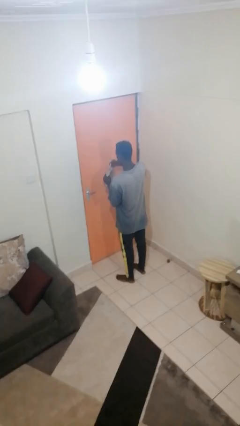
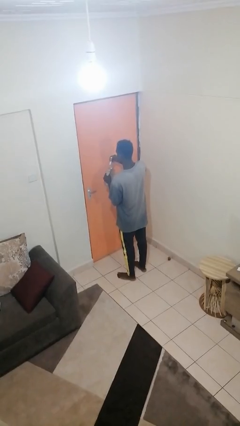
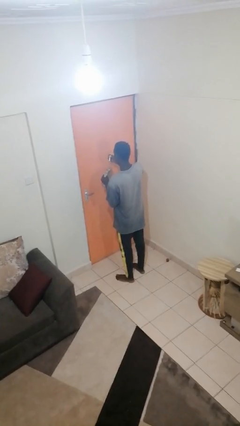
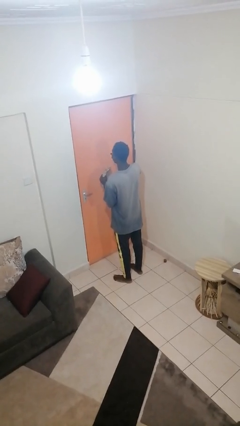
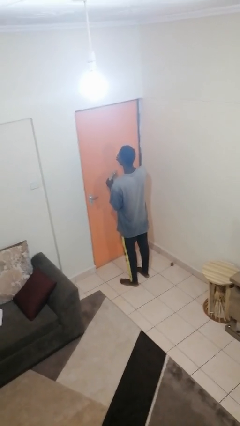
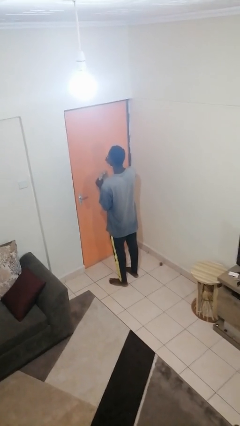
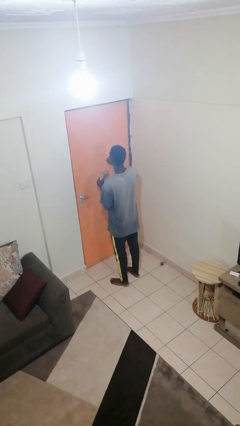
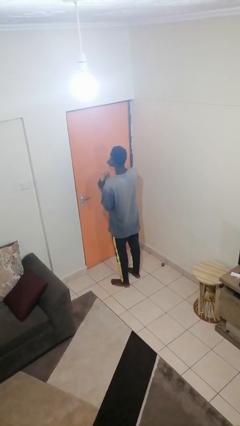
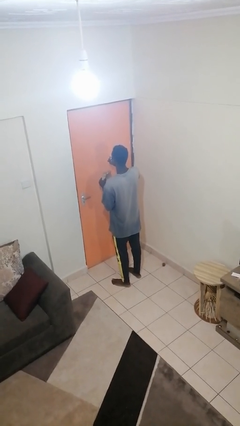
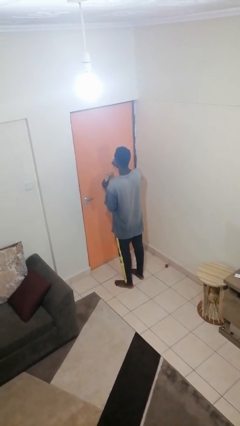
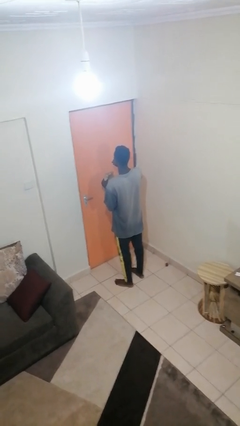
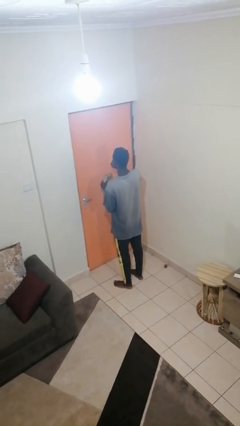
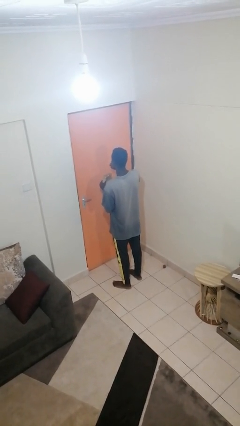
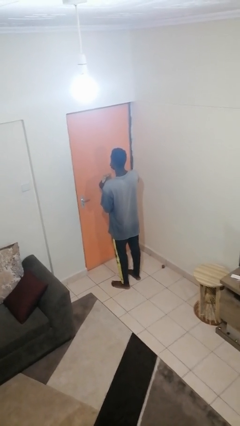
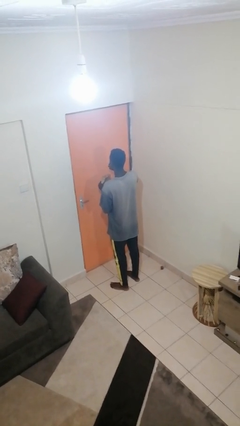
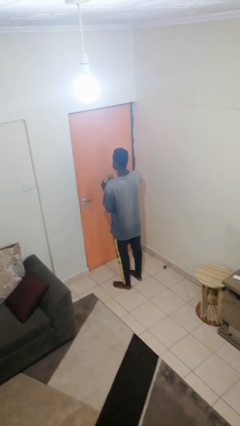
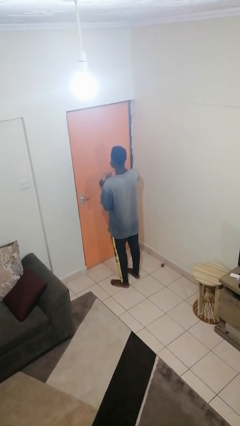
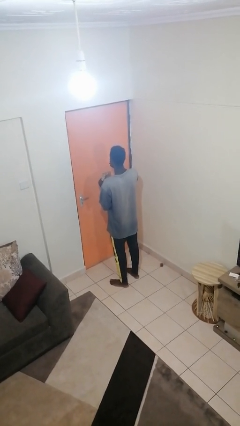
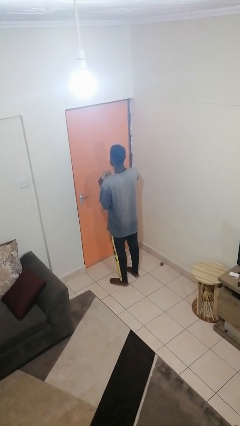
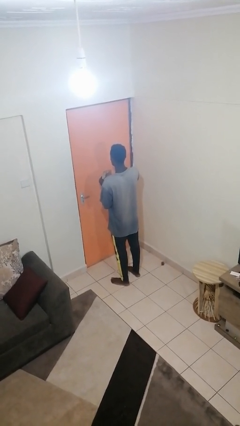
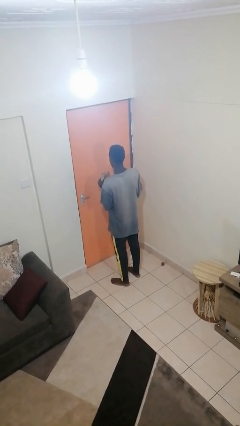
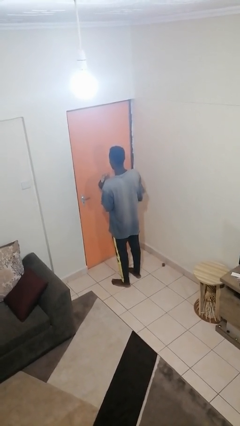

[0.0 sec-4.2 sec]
person eats snack from bag

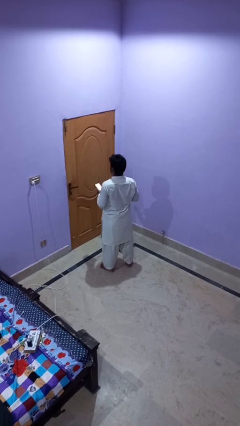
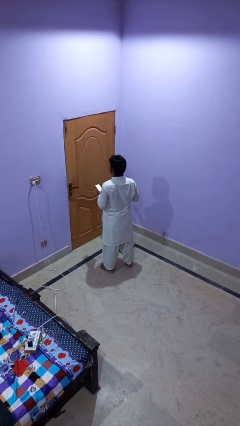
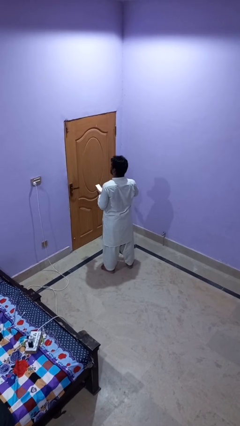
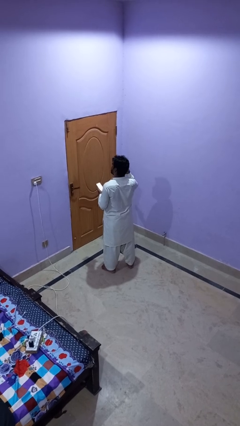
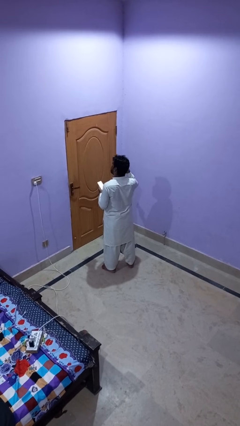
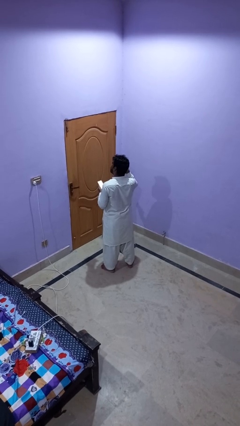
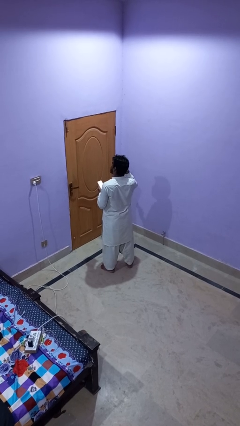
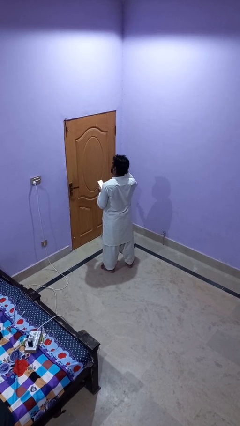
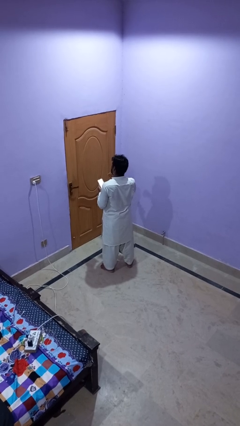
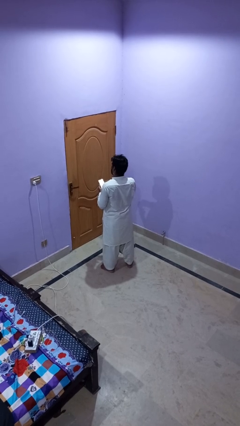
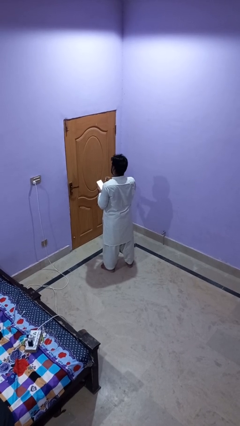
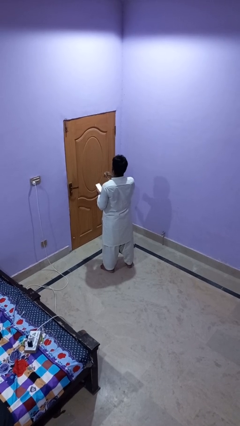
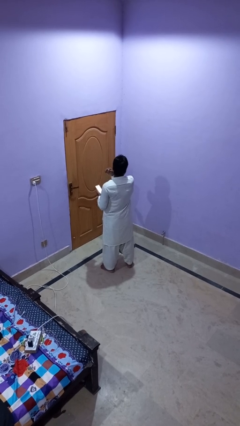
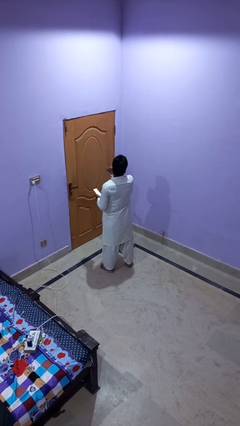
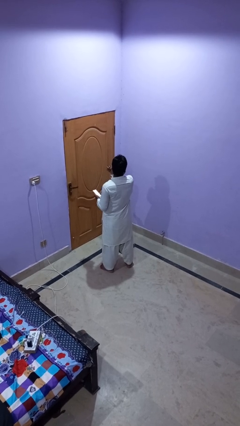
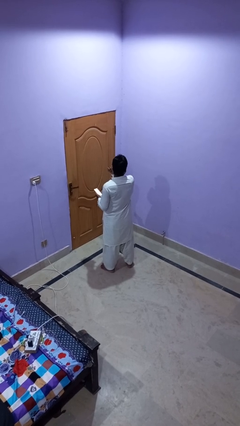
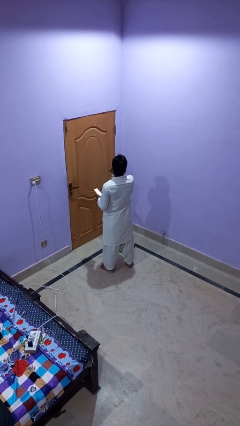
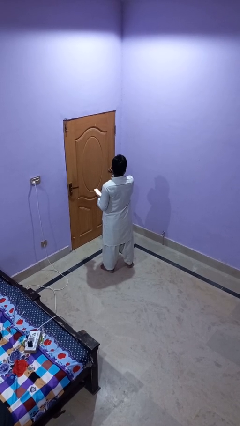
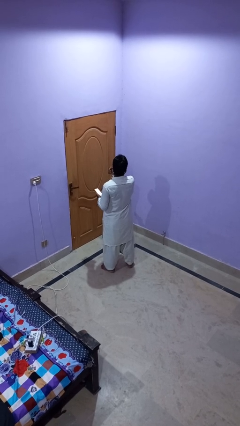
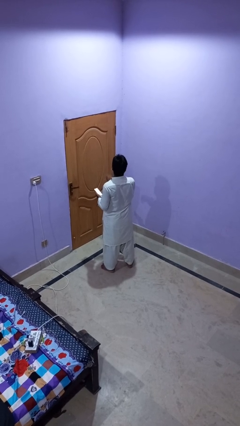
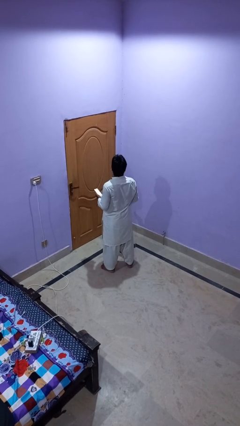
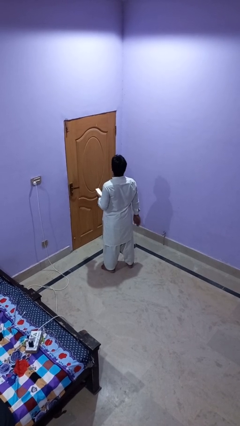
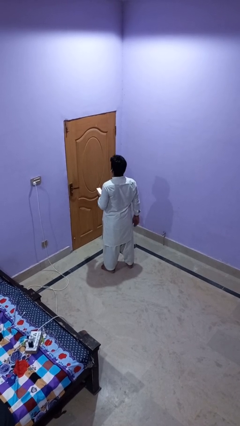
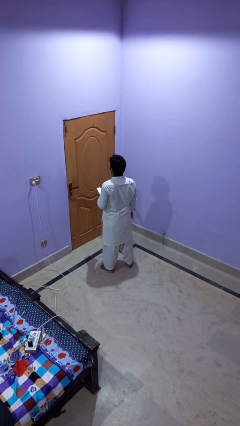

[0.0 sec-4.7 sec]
person puts on headphones

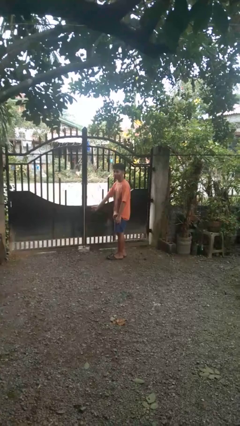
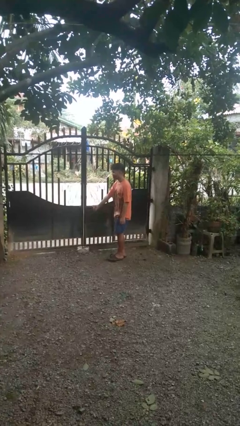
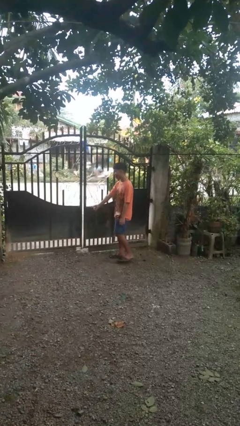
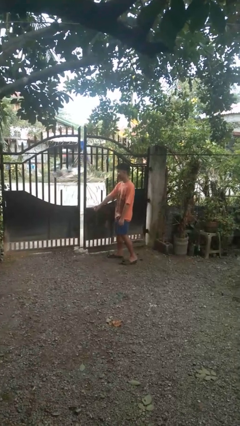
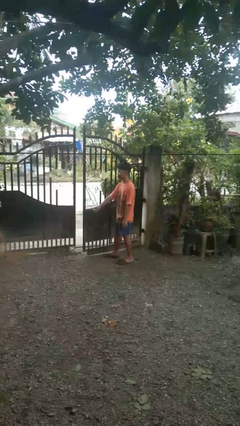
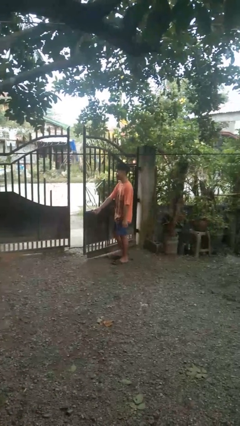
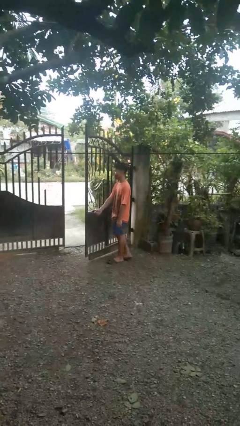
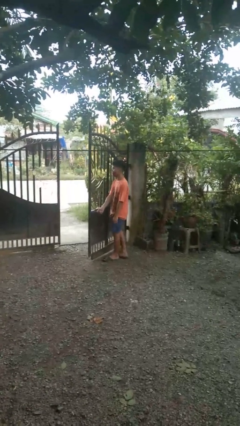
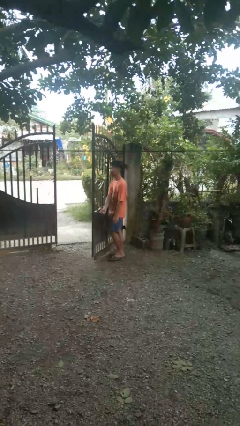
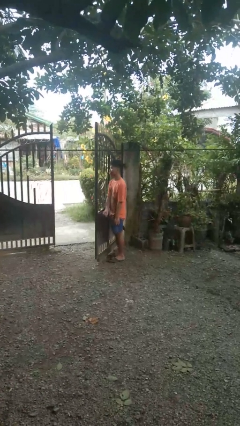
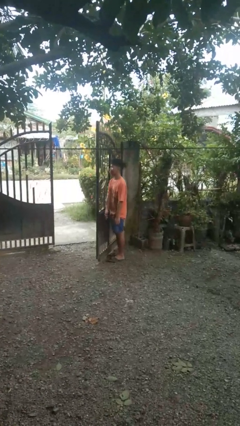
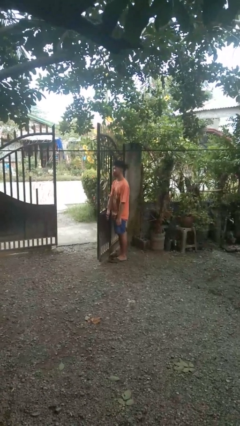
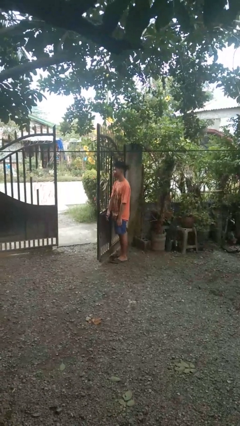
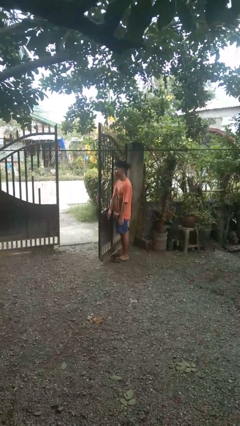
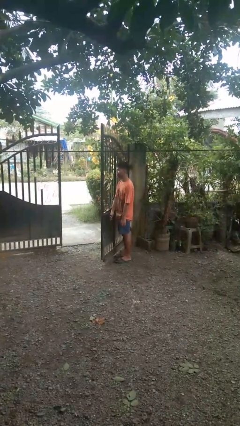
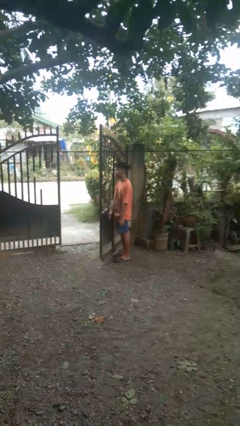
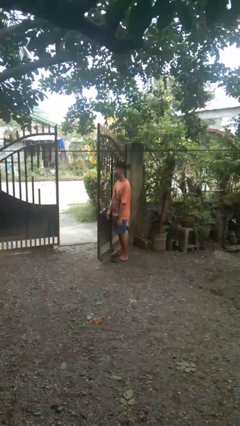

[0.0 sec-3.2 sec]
person opens gate

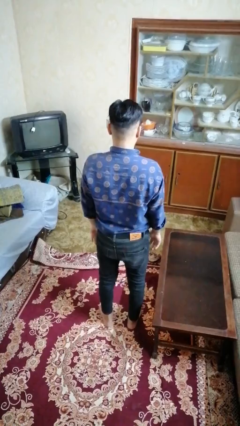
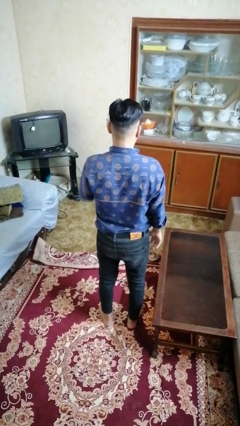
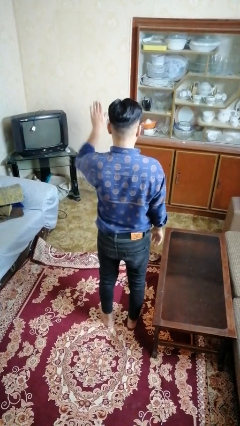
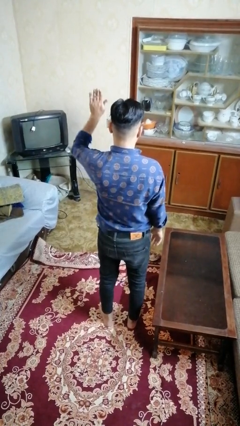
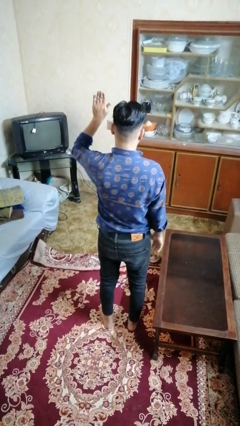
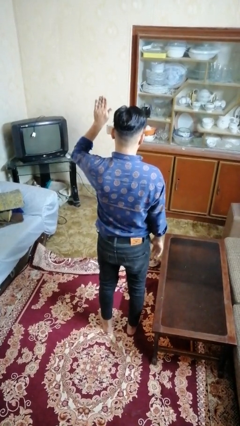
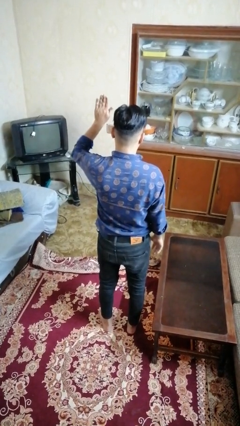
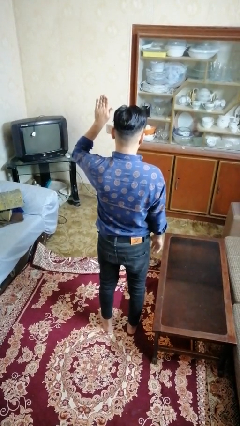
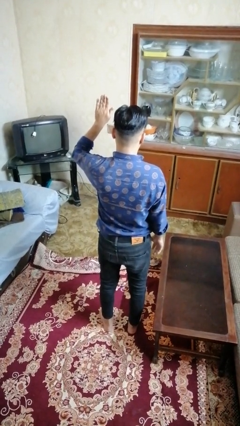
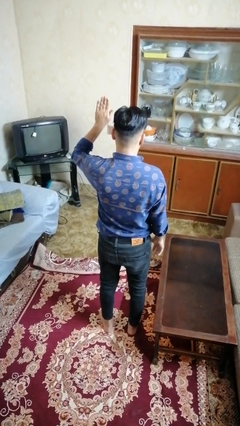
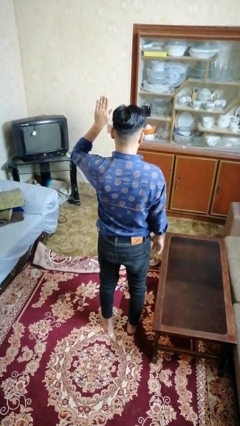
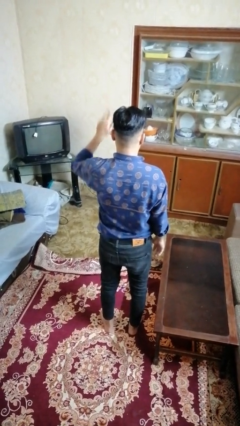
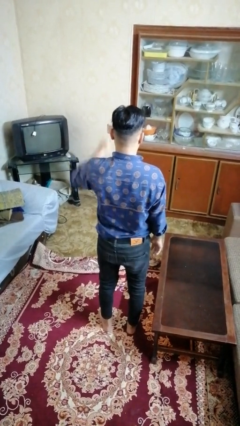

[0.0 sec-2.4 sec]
person gestures number five

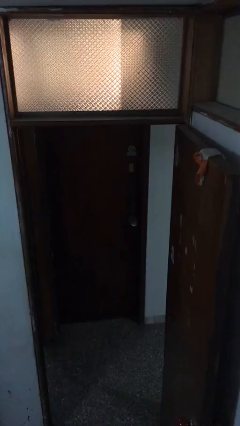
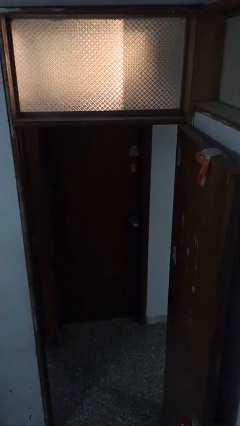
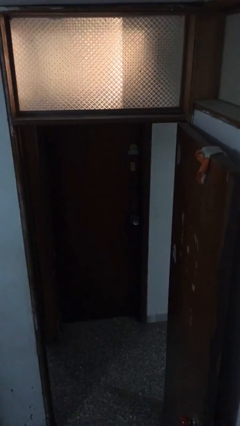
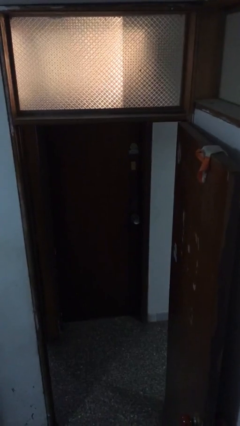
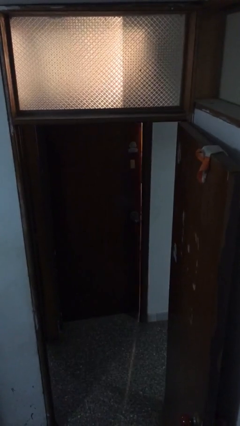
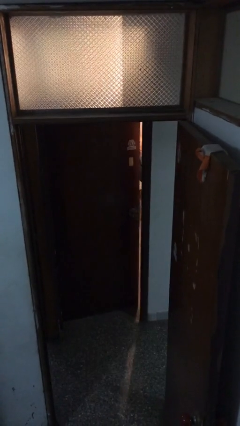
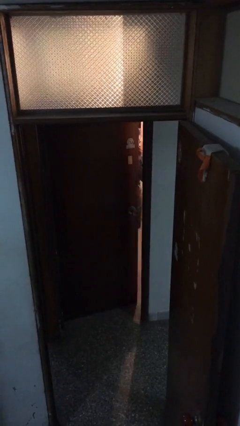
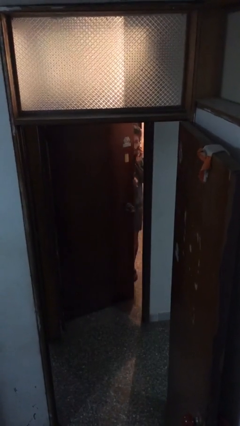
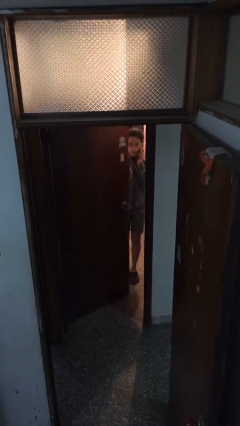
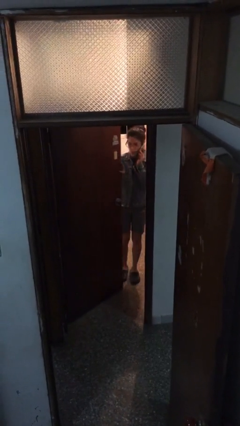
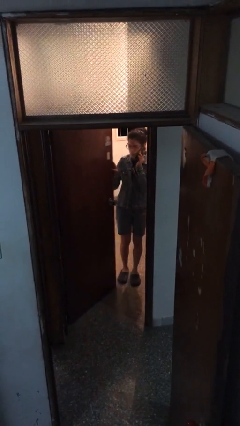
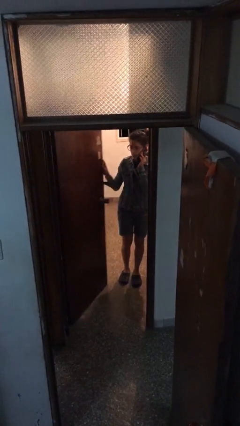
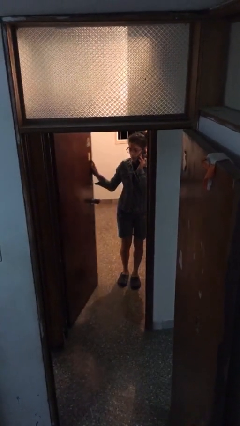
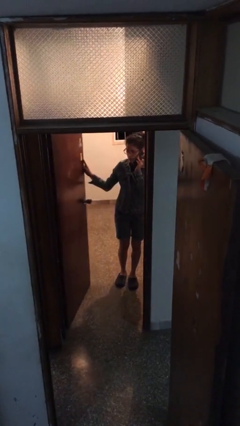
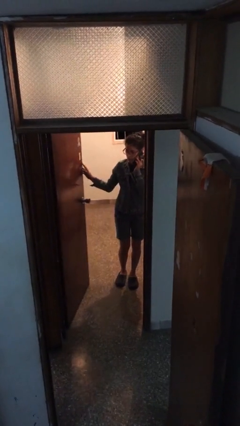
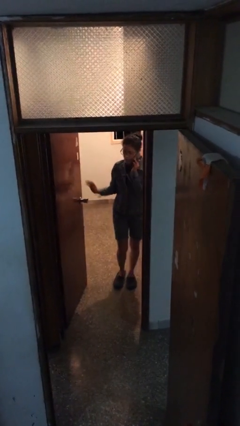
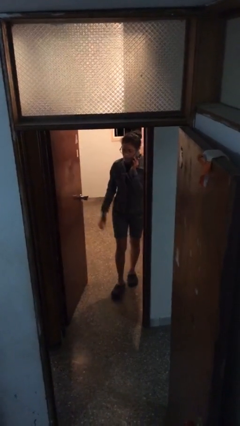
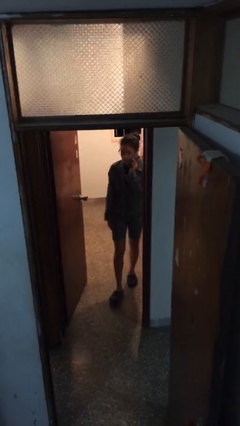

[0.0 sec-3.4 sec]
person opens facility door
